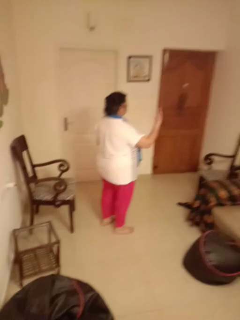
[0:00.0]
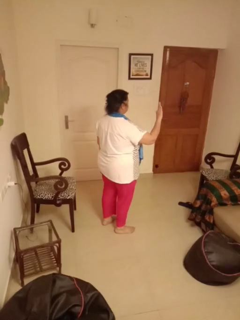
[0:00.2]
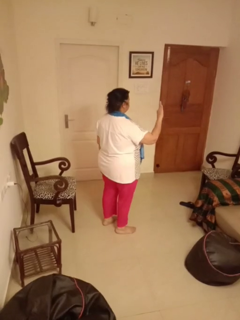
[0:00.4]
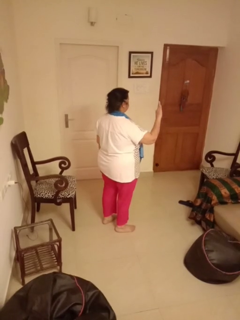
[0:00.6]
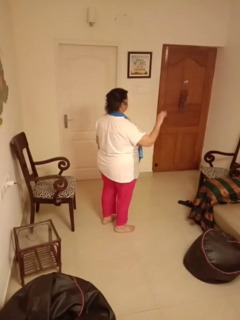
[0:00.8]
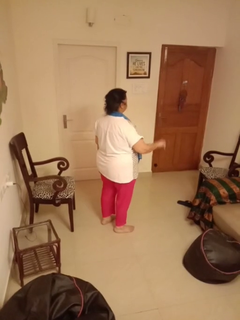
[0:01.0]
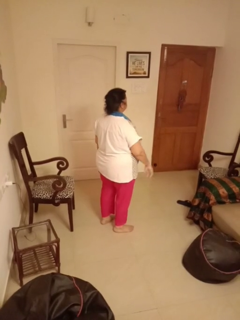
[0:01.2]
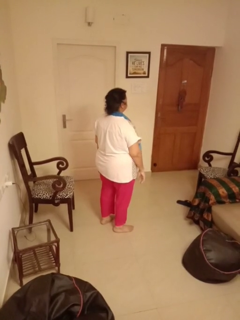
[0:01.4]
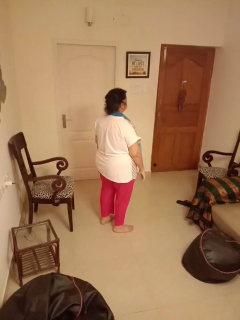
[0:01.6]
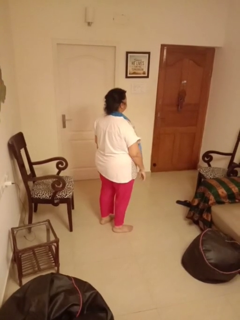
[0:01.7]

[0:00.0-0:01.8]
person gestures number three

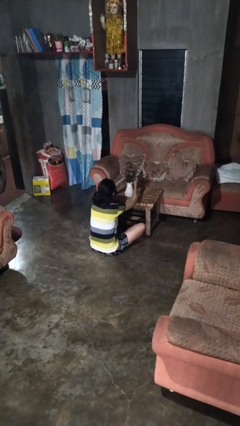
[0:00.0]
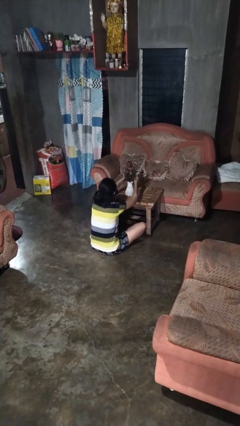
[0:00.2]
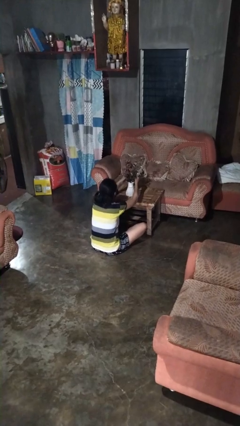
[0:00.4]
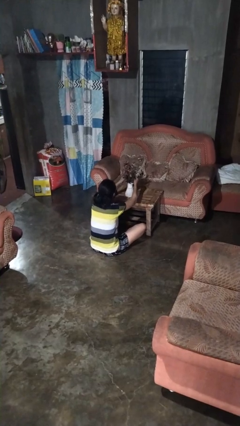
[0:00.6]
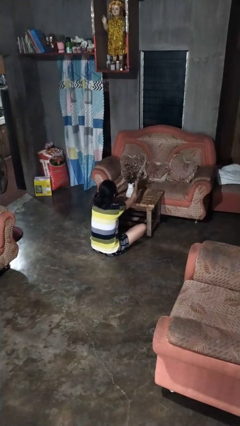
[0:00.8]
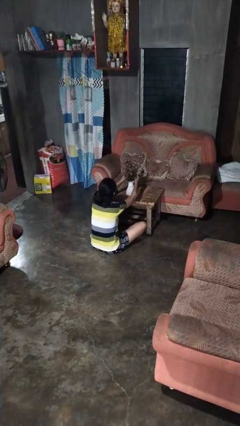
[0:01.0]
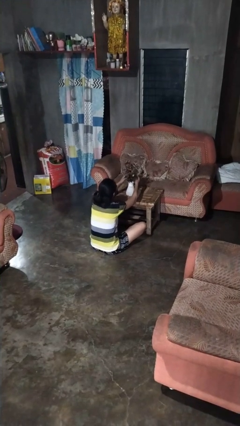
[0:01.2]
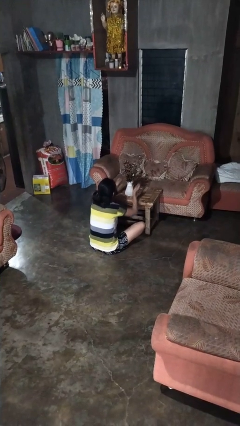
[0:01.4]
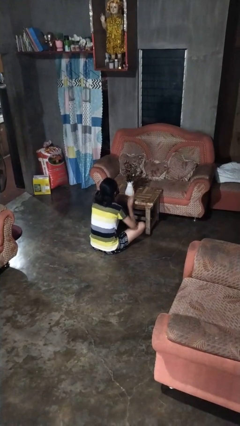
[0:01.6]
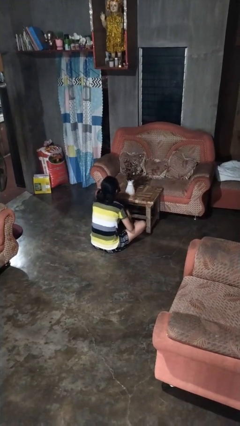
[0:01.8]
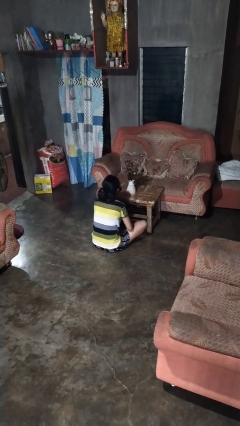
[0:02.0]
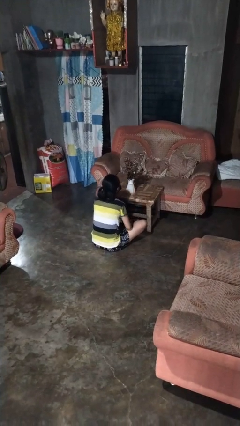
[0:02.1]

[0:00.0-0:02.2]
person arranges flowers in vase

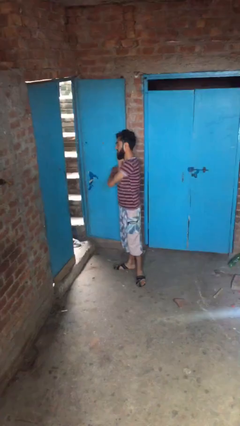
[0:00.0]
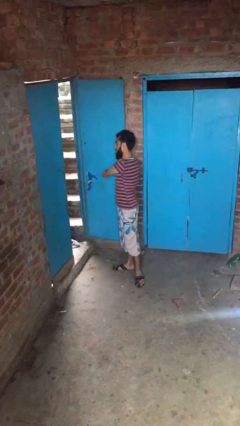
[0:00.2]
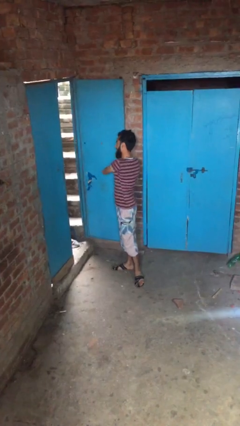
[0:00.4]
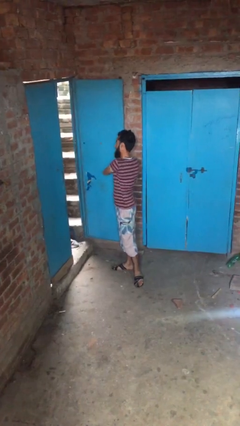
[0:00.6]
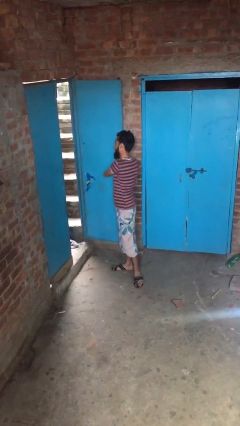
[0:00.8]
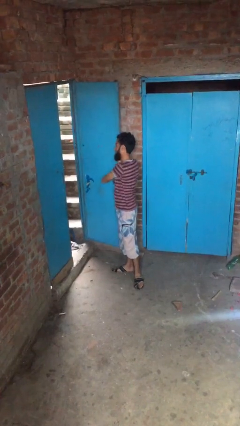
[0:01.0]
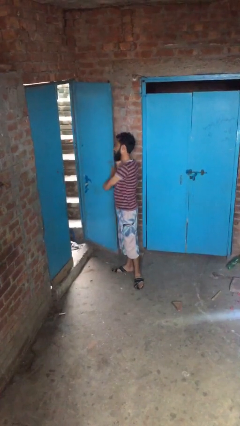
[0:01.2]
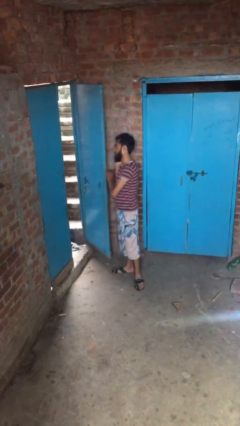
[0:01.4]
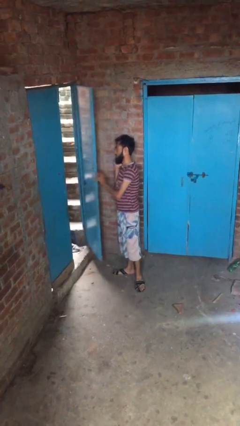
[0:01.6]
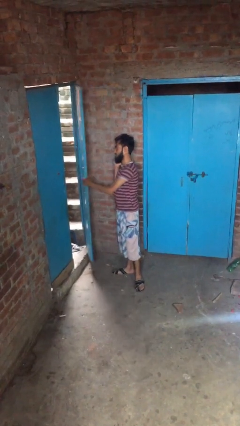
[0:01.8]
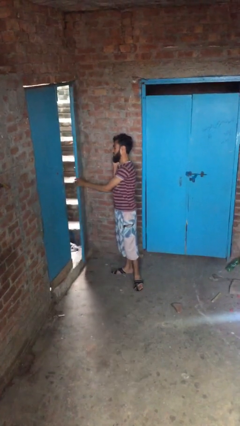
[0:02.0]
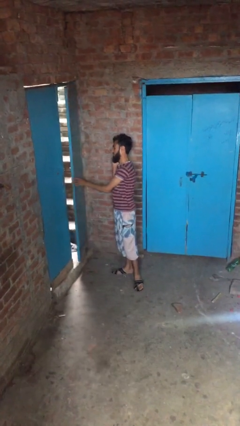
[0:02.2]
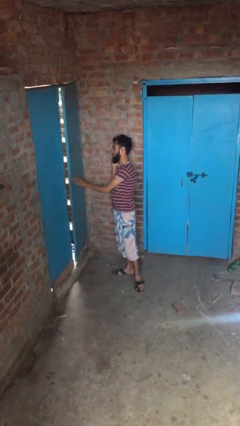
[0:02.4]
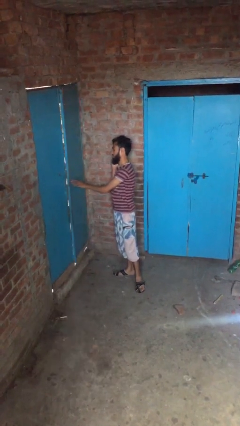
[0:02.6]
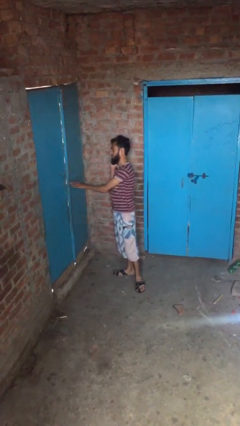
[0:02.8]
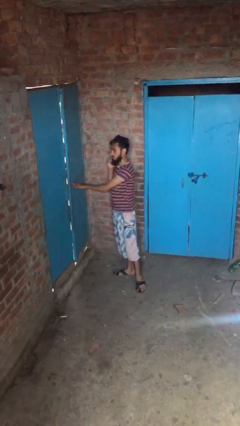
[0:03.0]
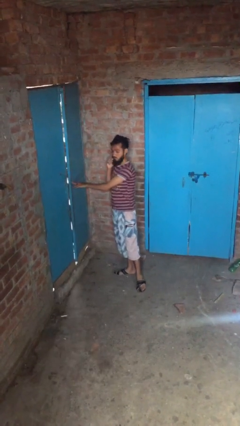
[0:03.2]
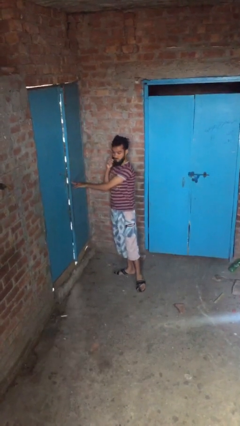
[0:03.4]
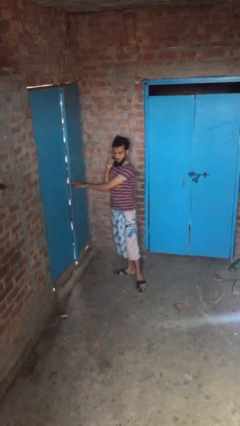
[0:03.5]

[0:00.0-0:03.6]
person closes facility door

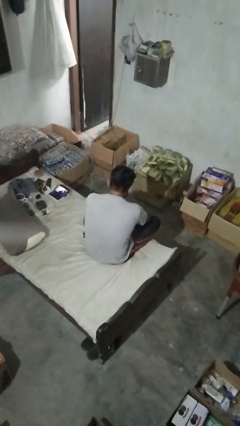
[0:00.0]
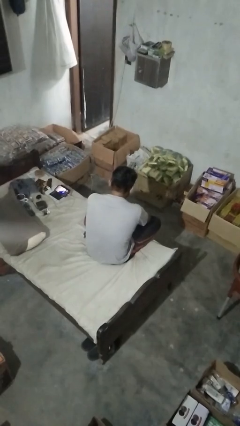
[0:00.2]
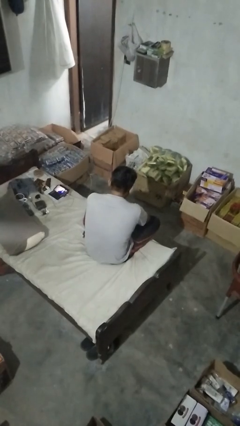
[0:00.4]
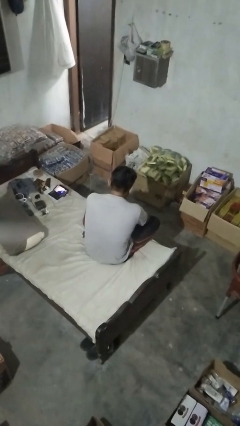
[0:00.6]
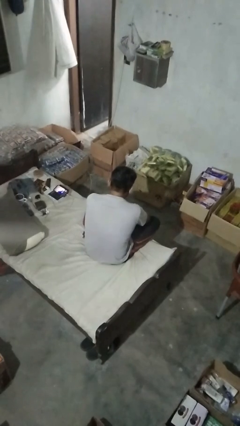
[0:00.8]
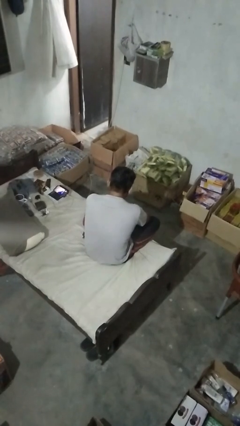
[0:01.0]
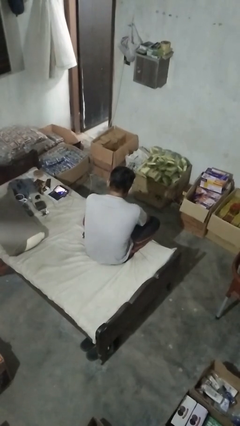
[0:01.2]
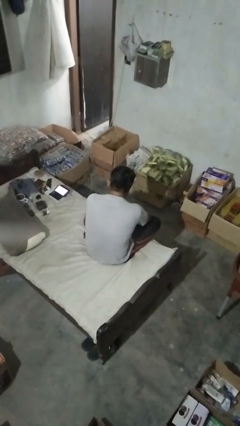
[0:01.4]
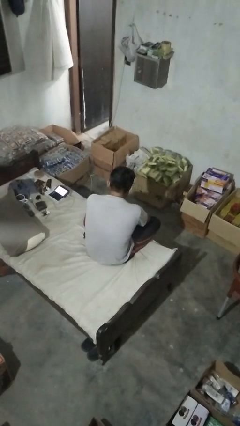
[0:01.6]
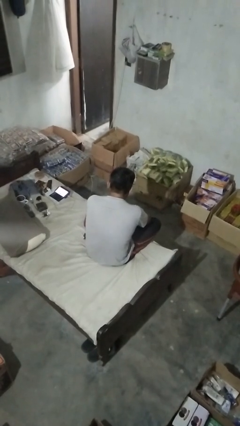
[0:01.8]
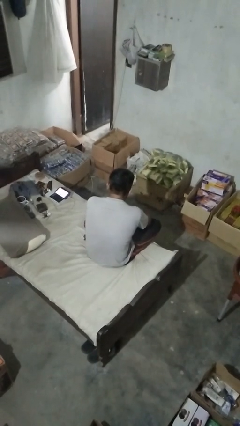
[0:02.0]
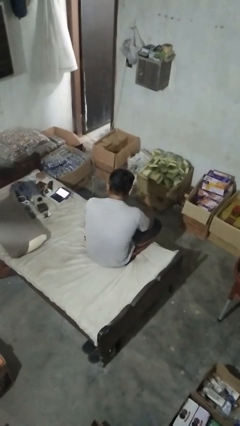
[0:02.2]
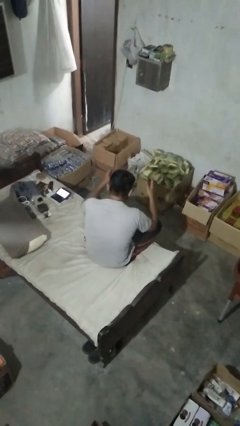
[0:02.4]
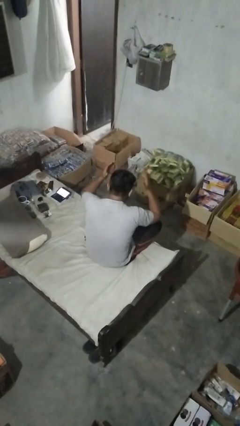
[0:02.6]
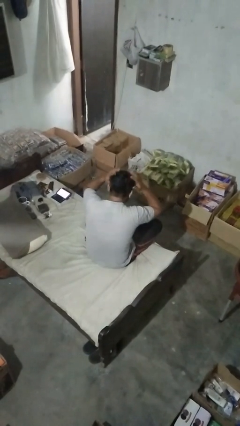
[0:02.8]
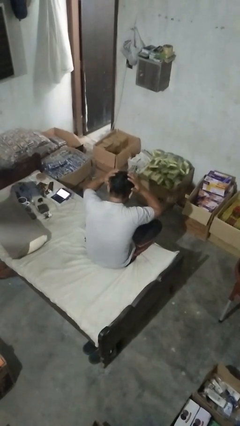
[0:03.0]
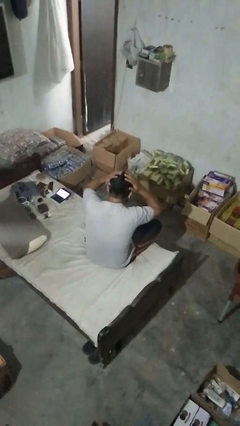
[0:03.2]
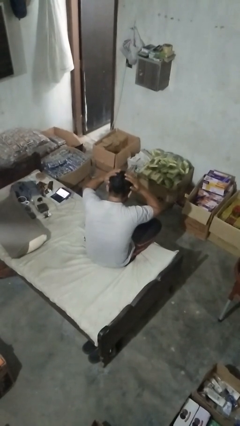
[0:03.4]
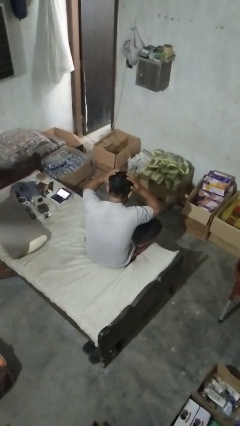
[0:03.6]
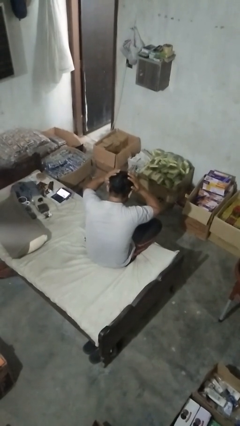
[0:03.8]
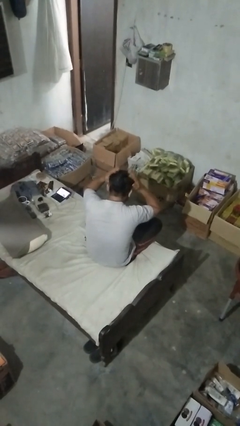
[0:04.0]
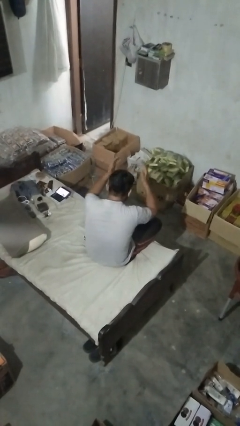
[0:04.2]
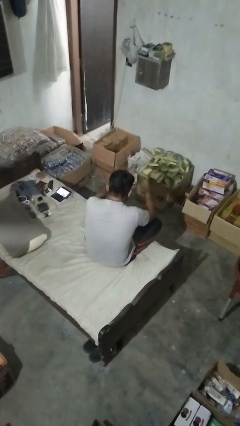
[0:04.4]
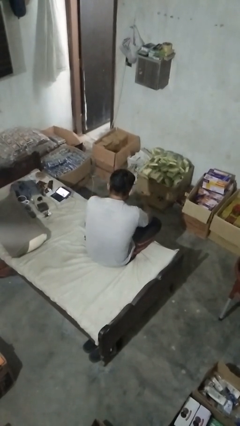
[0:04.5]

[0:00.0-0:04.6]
person pats head

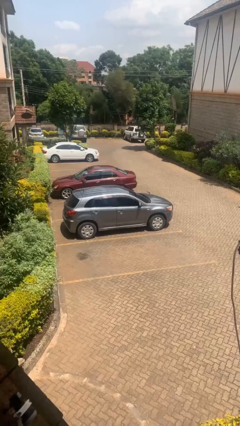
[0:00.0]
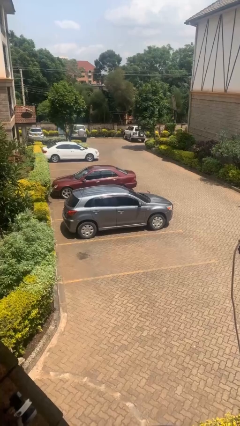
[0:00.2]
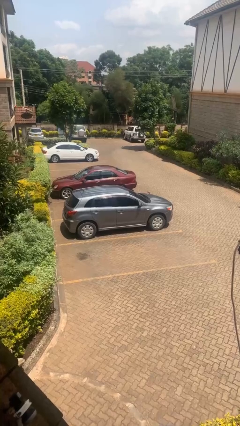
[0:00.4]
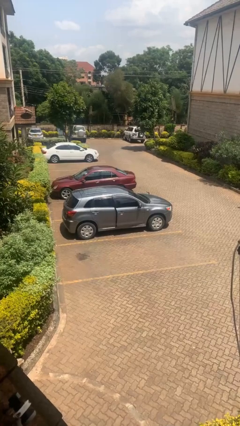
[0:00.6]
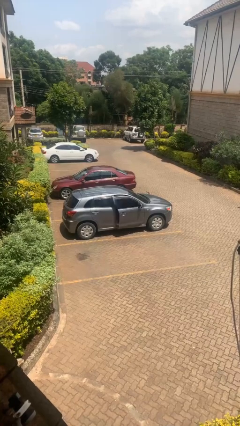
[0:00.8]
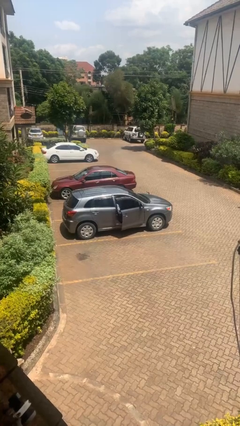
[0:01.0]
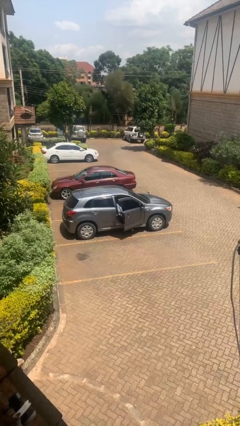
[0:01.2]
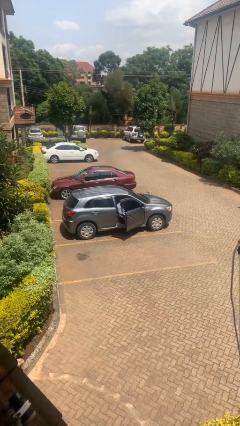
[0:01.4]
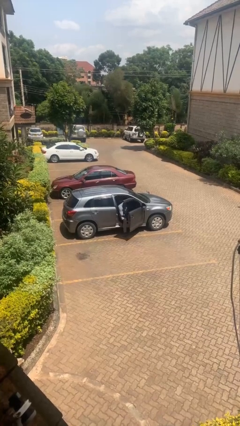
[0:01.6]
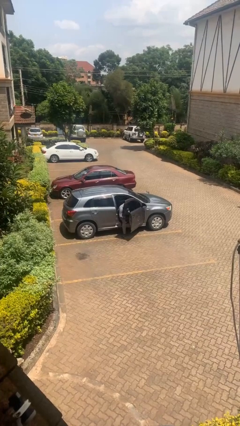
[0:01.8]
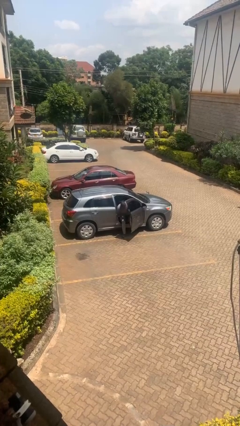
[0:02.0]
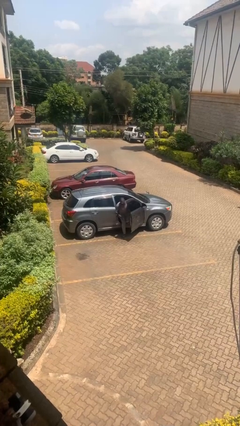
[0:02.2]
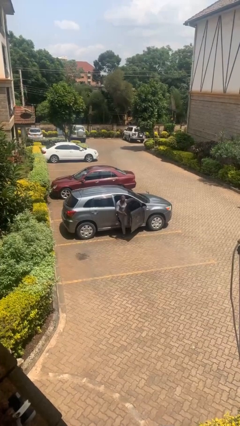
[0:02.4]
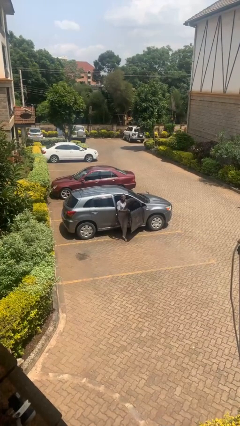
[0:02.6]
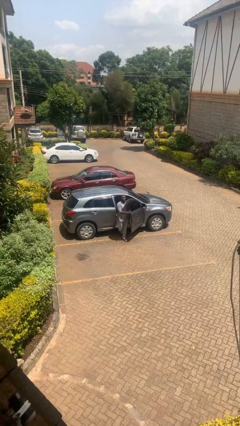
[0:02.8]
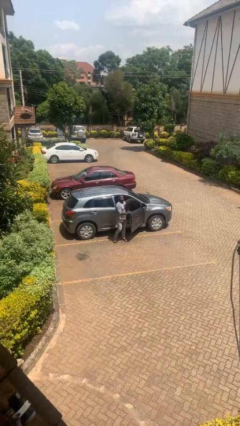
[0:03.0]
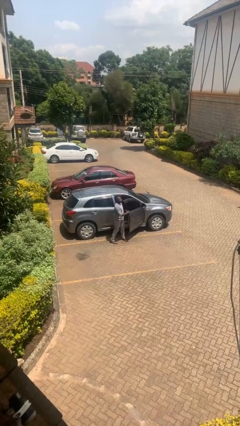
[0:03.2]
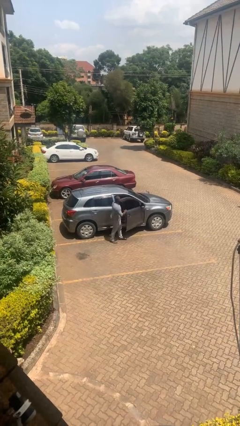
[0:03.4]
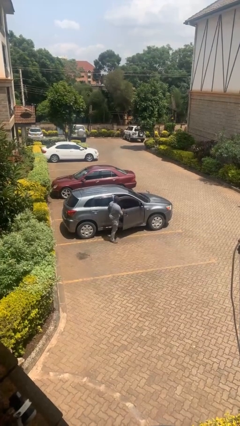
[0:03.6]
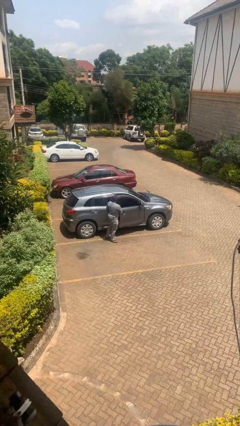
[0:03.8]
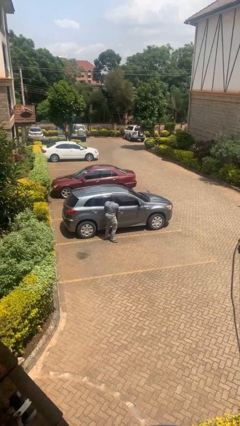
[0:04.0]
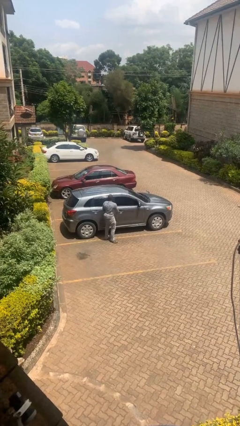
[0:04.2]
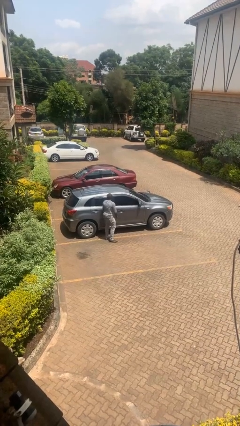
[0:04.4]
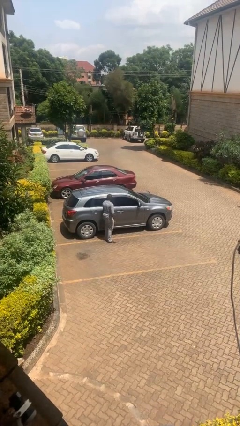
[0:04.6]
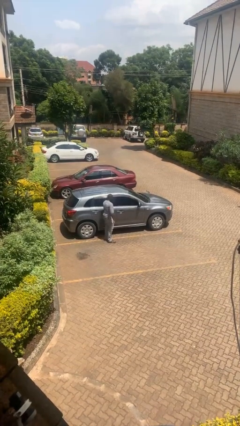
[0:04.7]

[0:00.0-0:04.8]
car drops off person

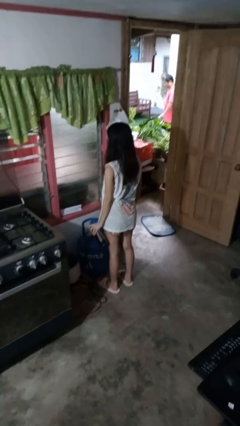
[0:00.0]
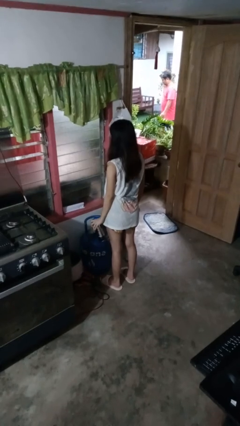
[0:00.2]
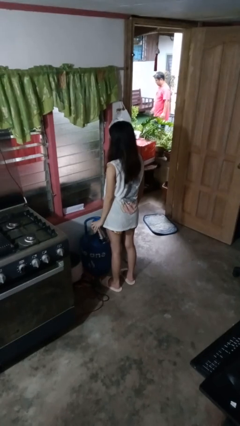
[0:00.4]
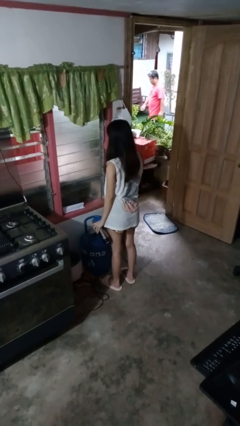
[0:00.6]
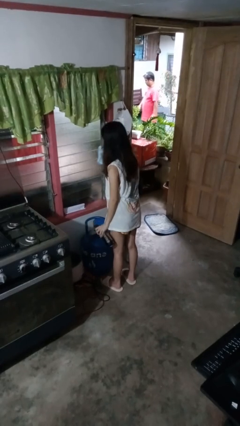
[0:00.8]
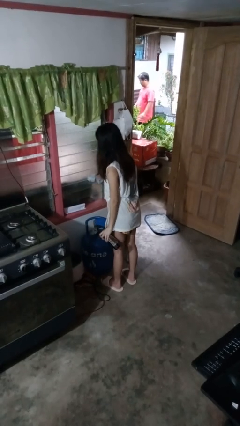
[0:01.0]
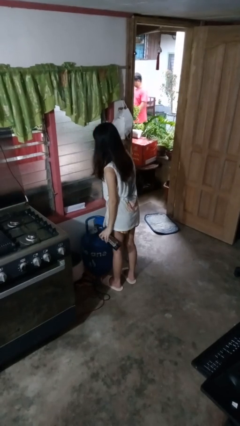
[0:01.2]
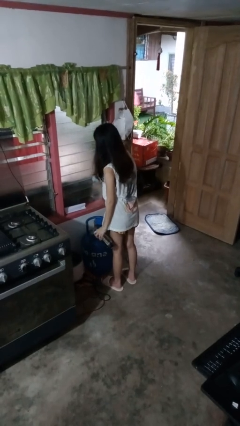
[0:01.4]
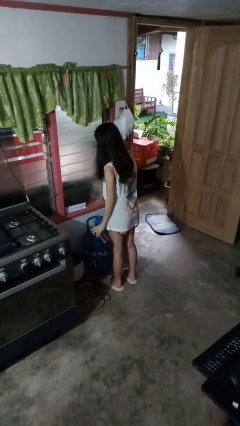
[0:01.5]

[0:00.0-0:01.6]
person washes window
